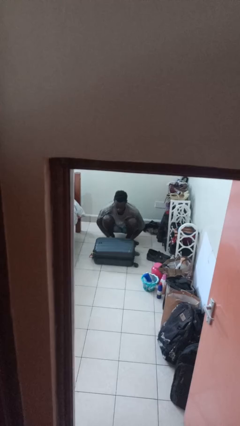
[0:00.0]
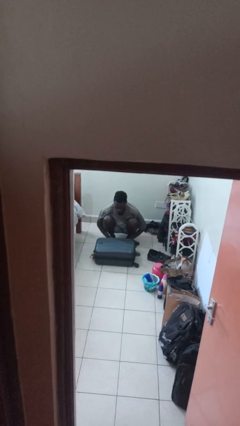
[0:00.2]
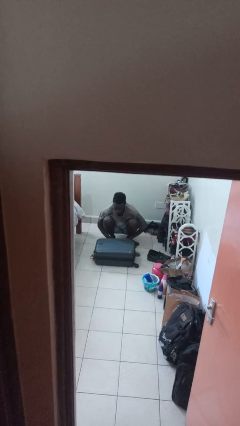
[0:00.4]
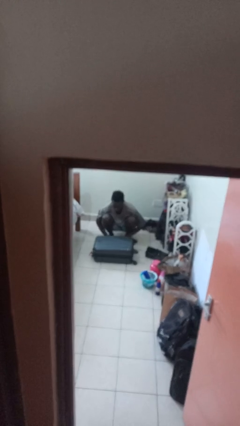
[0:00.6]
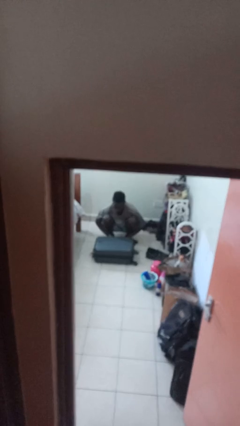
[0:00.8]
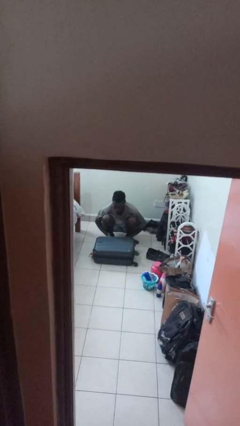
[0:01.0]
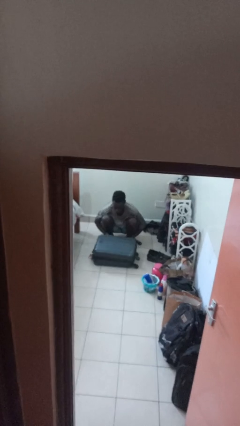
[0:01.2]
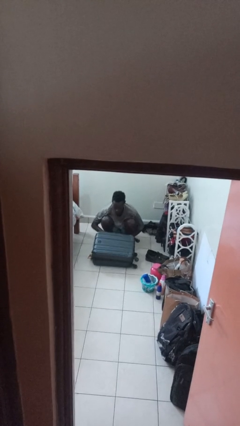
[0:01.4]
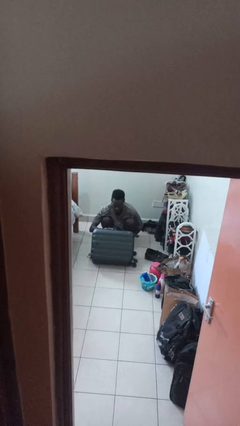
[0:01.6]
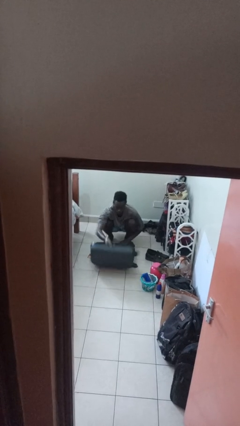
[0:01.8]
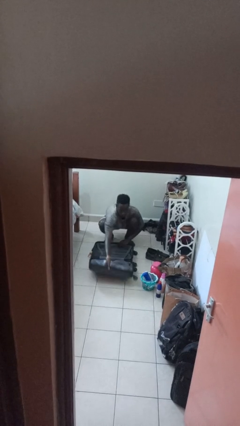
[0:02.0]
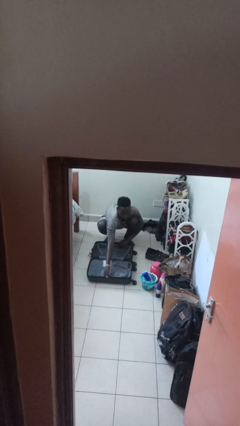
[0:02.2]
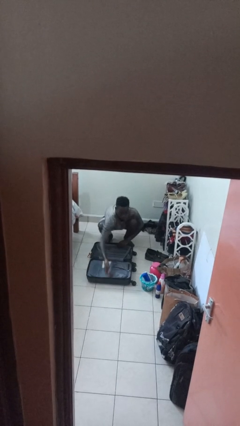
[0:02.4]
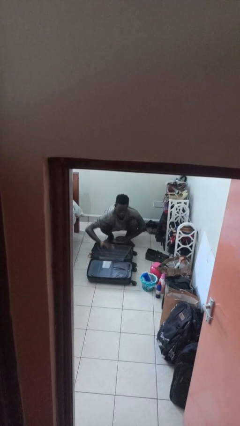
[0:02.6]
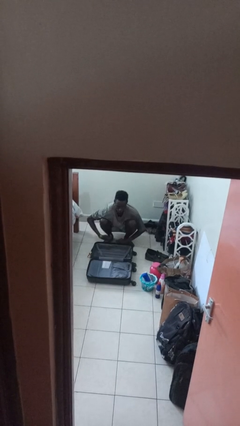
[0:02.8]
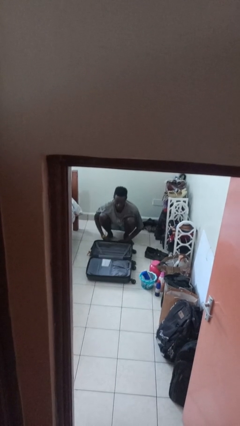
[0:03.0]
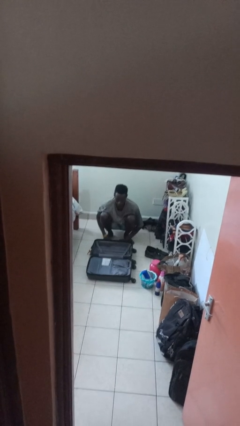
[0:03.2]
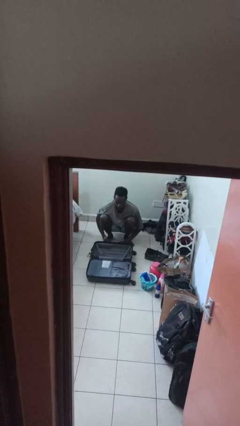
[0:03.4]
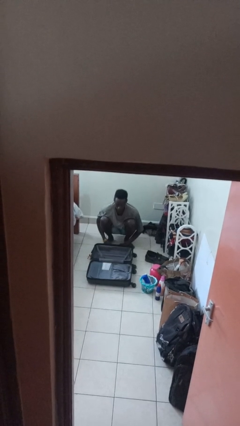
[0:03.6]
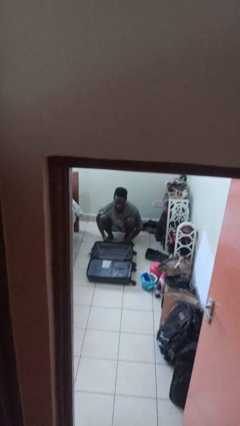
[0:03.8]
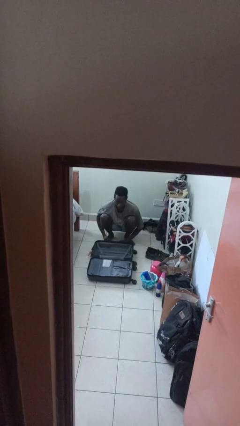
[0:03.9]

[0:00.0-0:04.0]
person opens suitcase

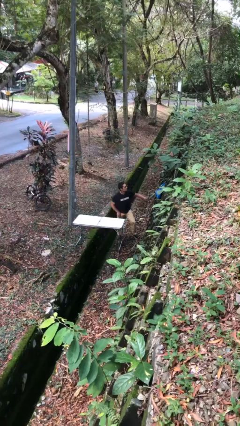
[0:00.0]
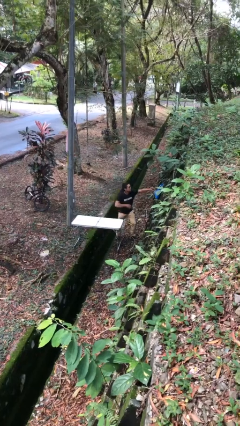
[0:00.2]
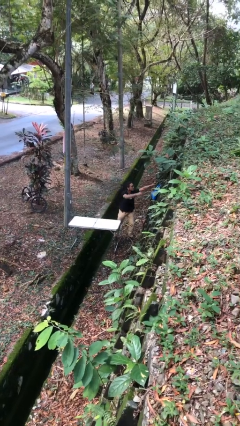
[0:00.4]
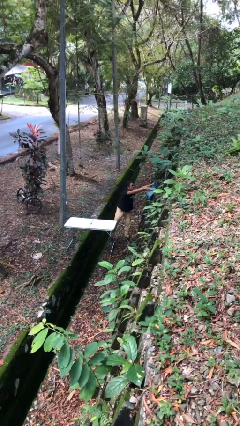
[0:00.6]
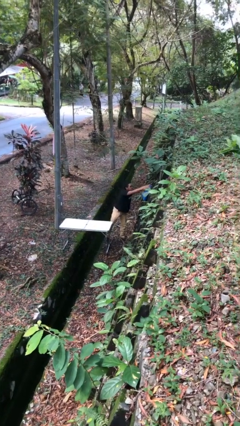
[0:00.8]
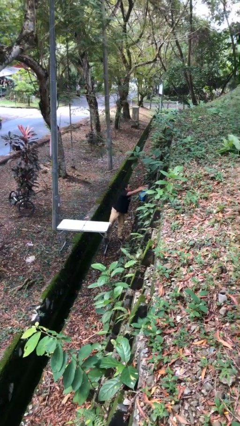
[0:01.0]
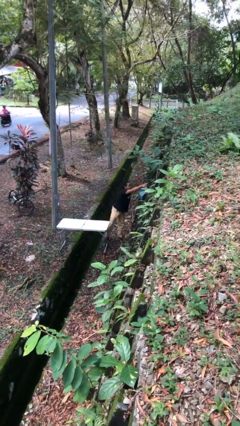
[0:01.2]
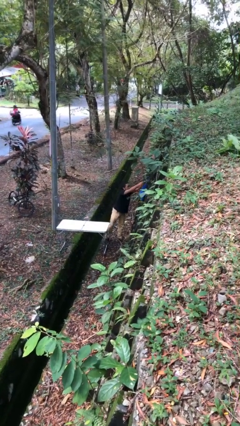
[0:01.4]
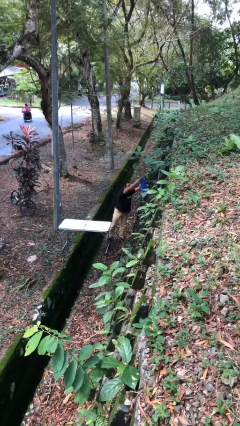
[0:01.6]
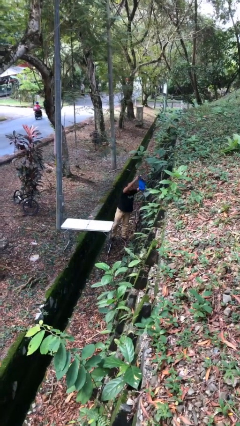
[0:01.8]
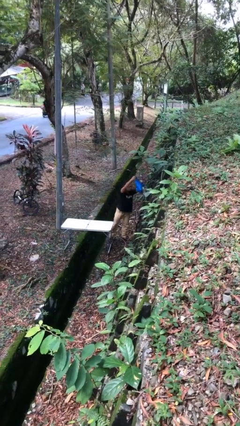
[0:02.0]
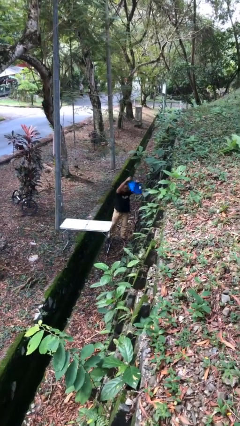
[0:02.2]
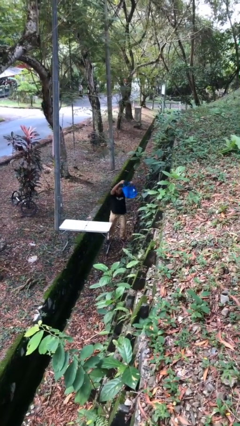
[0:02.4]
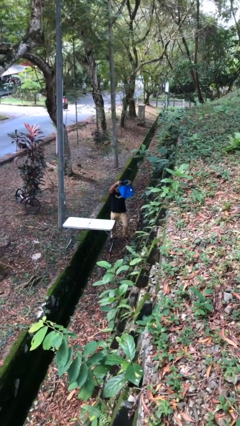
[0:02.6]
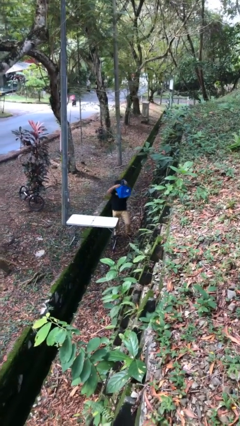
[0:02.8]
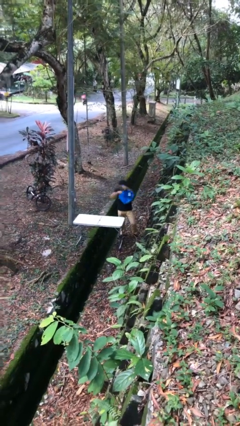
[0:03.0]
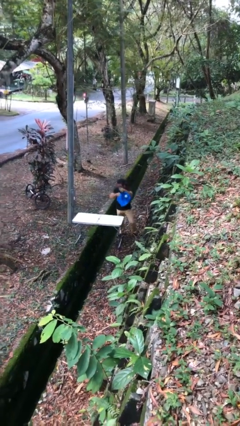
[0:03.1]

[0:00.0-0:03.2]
person picks up object from shelf

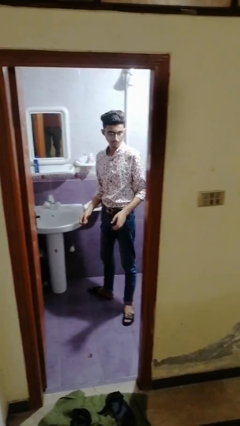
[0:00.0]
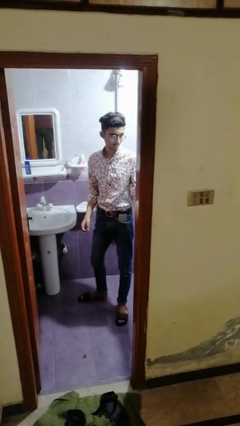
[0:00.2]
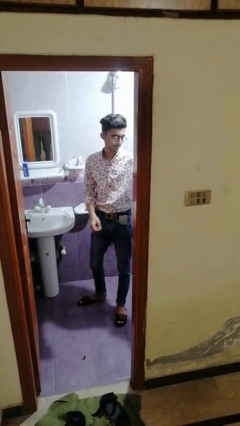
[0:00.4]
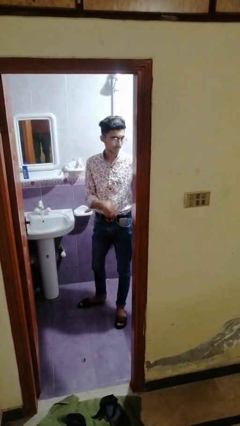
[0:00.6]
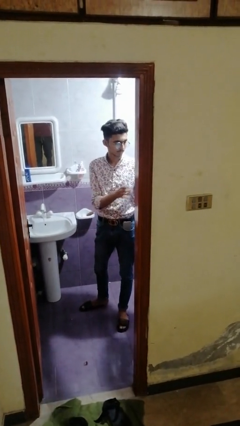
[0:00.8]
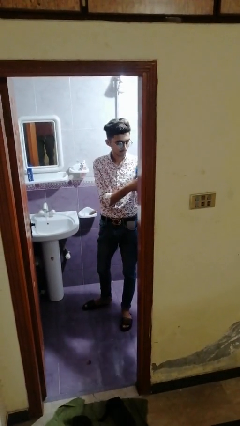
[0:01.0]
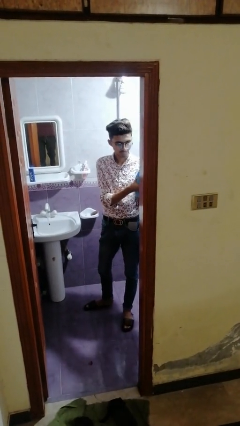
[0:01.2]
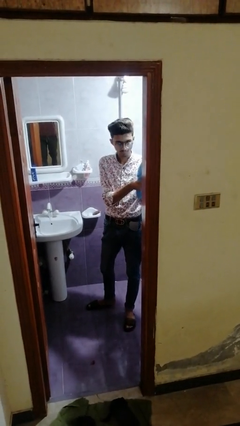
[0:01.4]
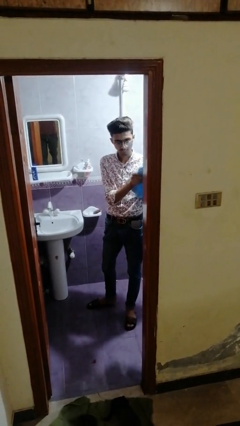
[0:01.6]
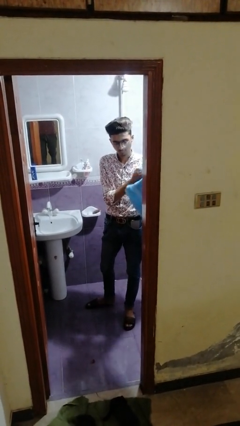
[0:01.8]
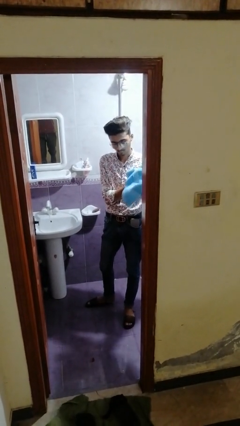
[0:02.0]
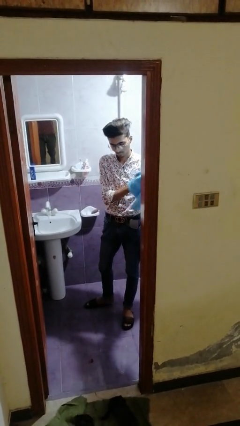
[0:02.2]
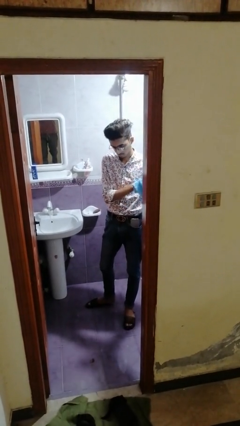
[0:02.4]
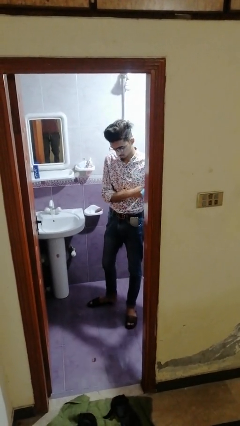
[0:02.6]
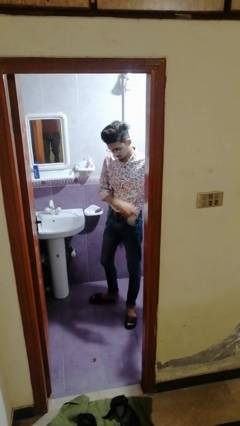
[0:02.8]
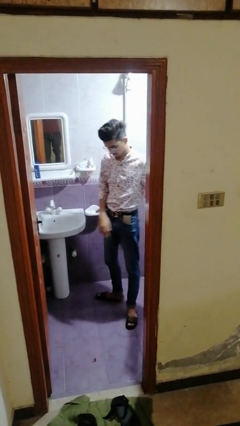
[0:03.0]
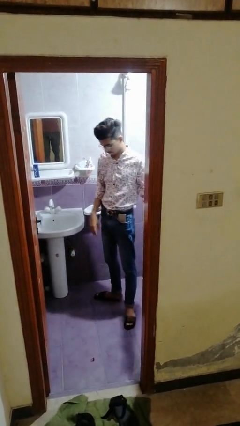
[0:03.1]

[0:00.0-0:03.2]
person dries hands with towel

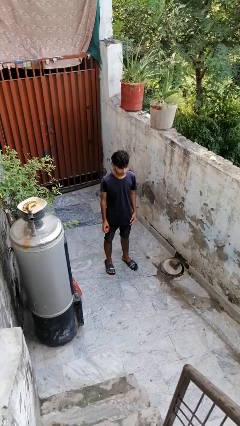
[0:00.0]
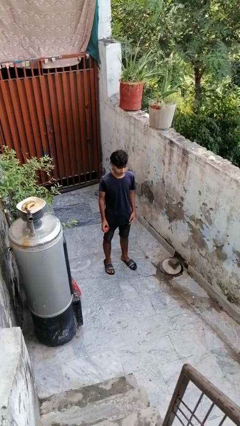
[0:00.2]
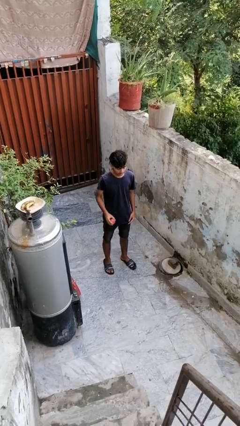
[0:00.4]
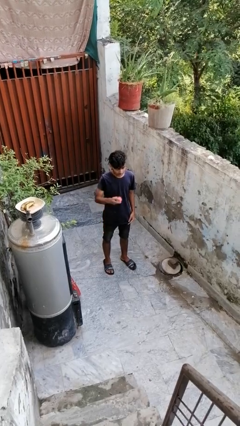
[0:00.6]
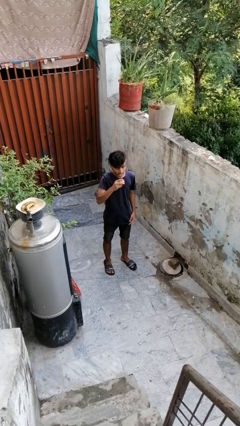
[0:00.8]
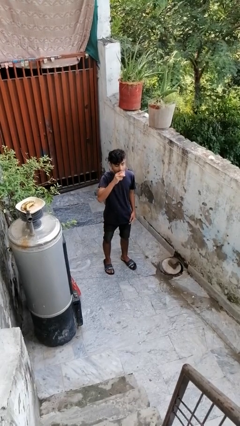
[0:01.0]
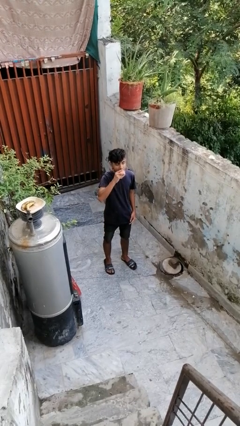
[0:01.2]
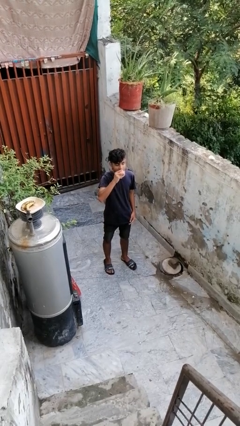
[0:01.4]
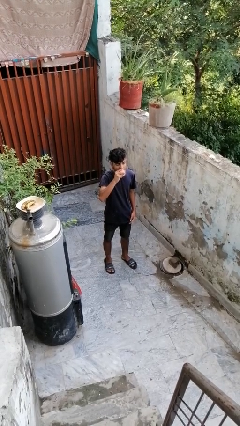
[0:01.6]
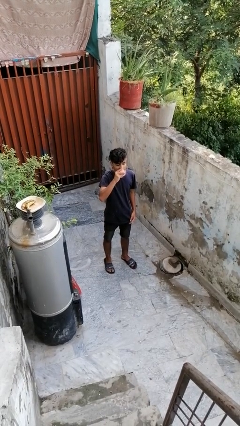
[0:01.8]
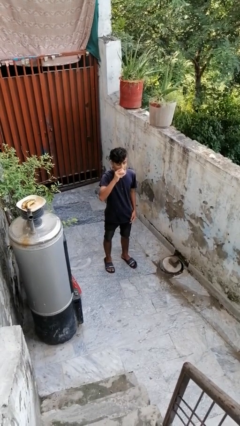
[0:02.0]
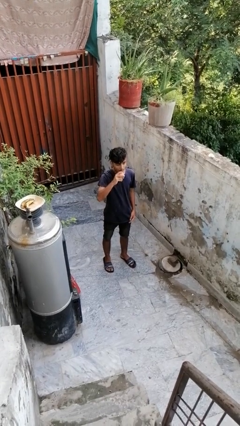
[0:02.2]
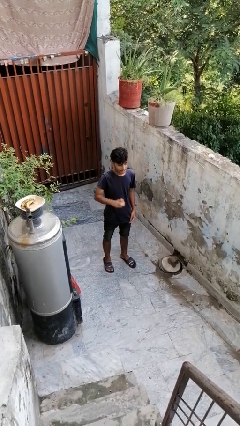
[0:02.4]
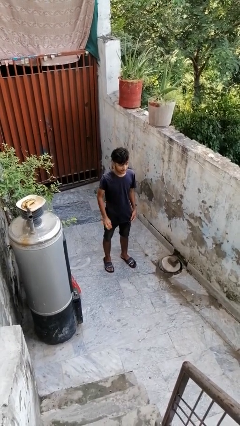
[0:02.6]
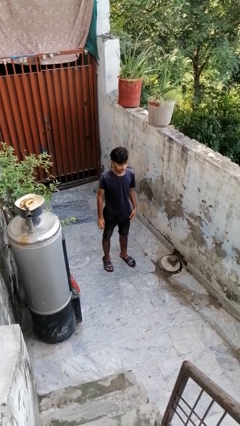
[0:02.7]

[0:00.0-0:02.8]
person eats apple

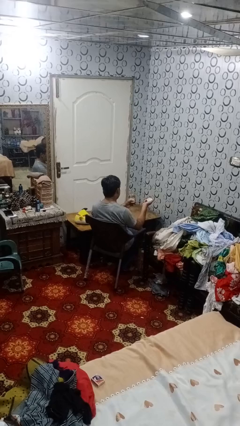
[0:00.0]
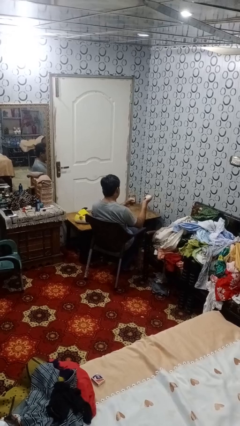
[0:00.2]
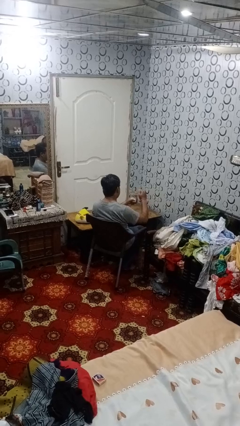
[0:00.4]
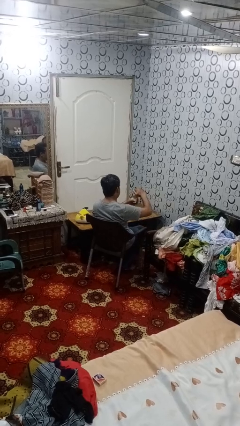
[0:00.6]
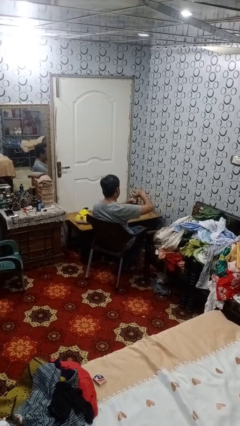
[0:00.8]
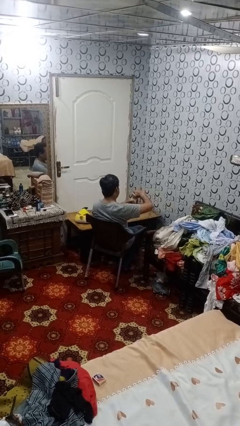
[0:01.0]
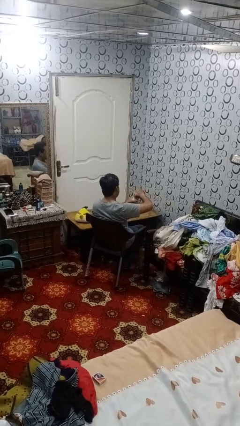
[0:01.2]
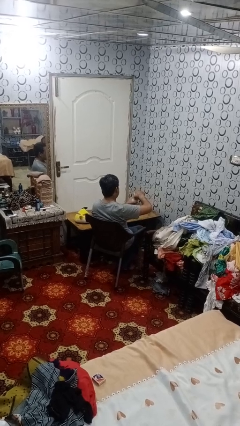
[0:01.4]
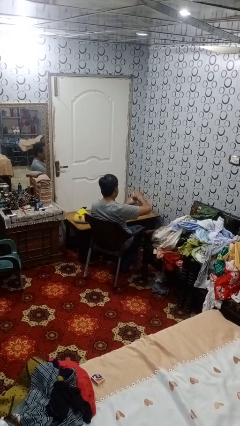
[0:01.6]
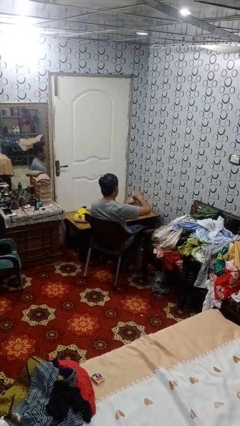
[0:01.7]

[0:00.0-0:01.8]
person closes jar

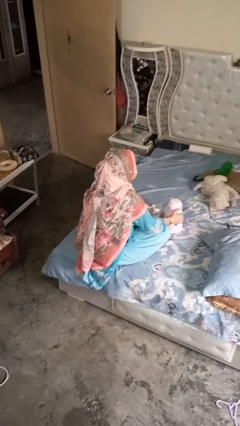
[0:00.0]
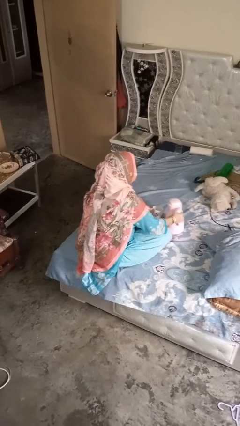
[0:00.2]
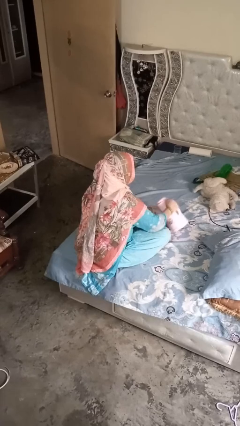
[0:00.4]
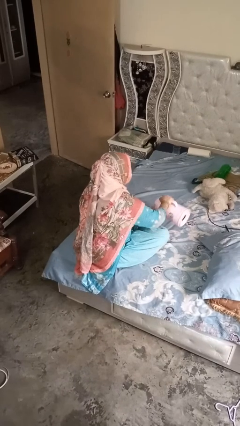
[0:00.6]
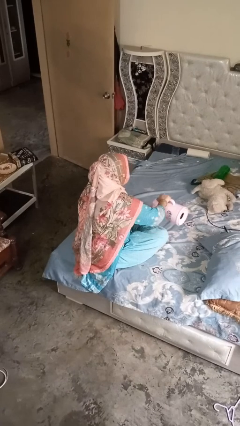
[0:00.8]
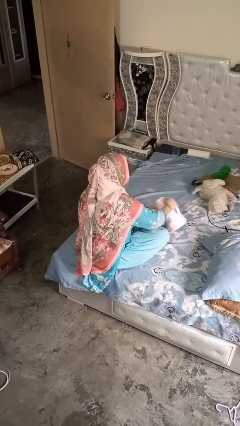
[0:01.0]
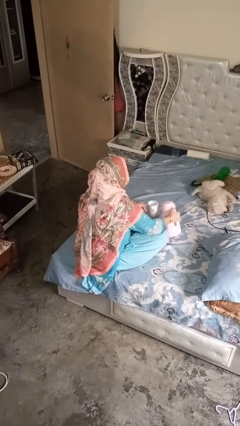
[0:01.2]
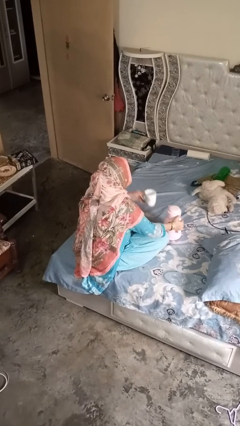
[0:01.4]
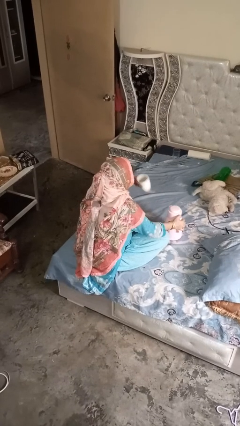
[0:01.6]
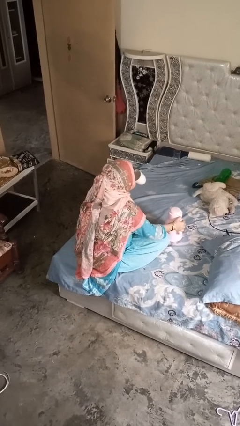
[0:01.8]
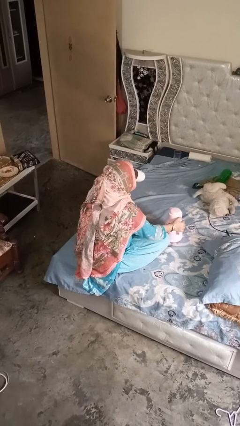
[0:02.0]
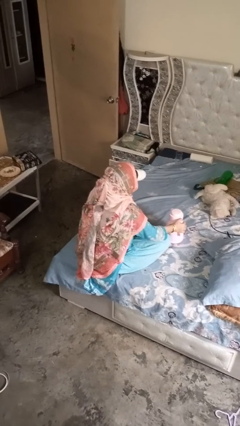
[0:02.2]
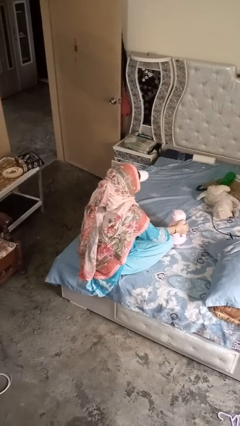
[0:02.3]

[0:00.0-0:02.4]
person pours coffee into mug
